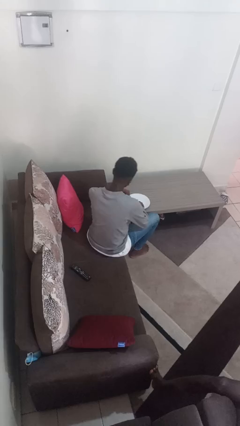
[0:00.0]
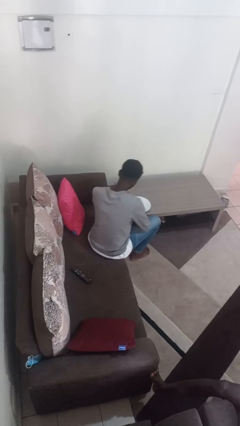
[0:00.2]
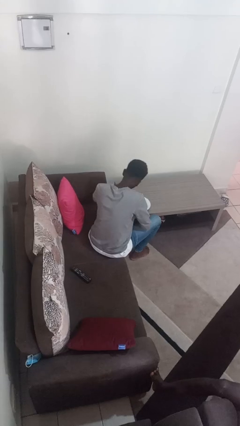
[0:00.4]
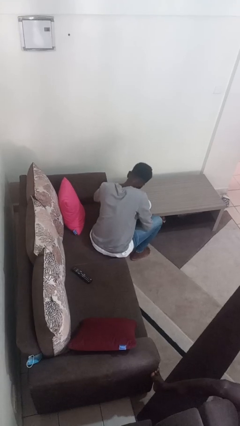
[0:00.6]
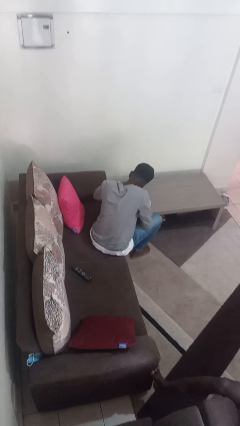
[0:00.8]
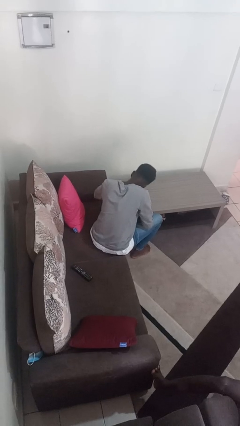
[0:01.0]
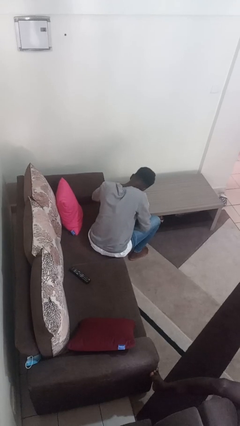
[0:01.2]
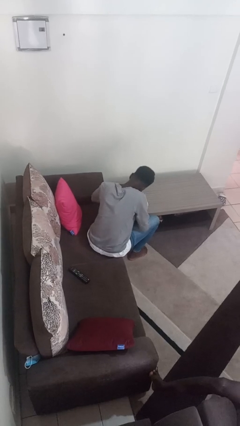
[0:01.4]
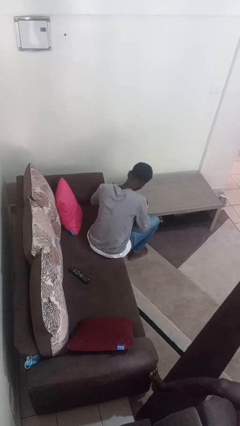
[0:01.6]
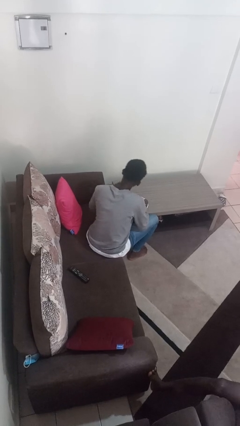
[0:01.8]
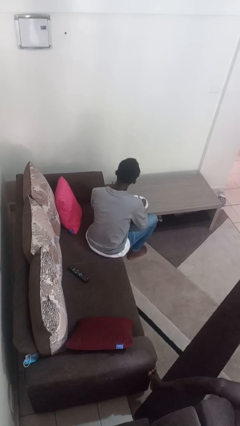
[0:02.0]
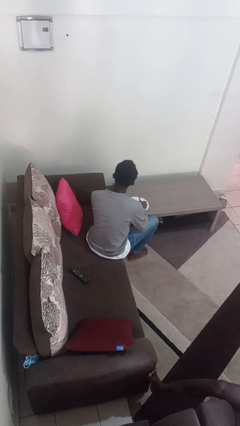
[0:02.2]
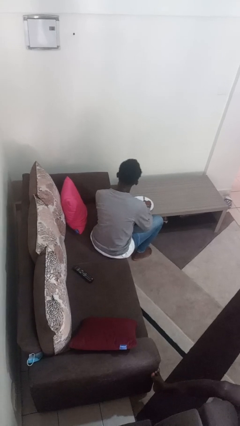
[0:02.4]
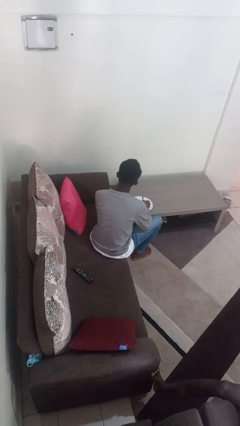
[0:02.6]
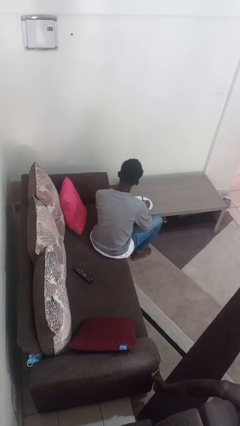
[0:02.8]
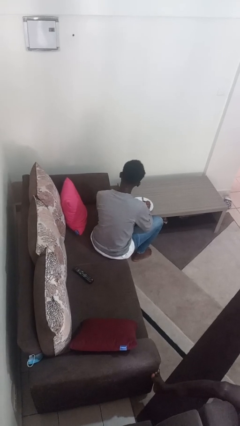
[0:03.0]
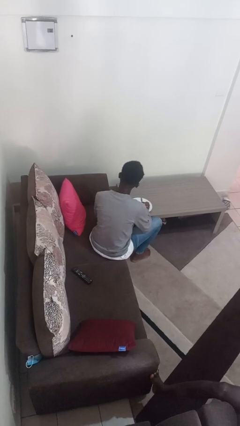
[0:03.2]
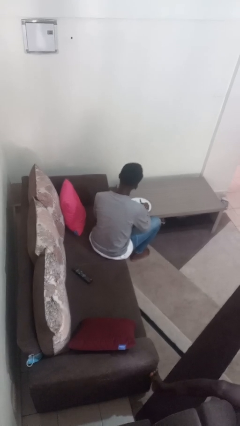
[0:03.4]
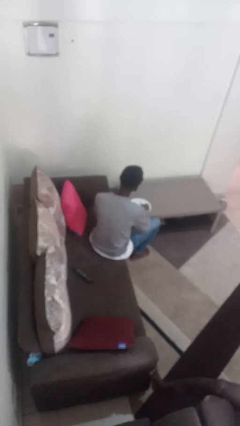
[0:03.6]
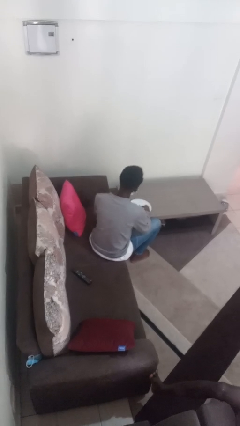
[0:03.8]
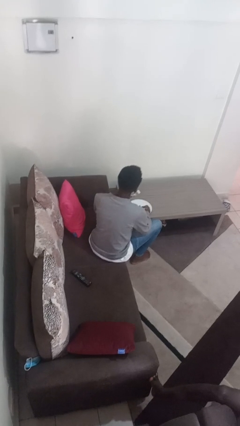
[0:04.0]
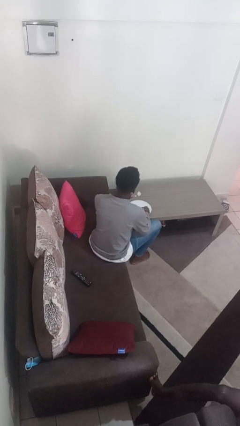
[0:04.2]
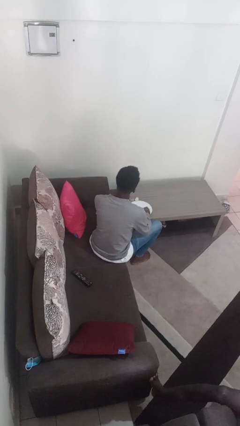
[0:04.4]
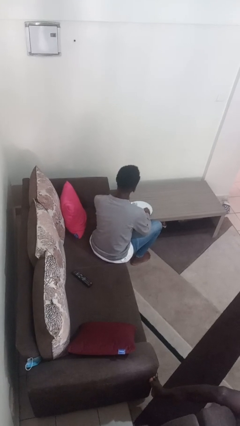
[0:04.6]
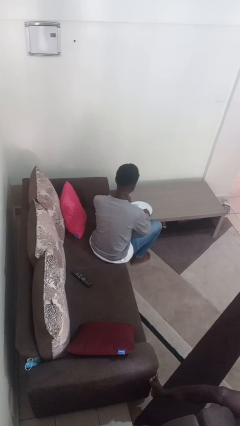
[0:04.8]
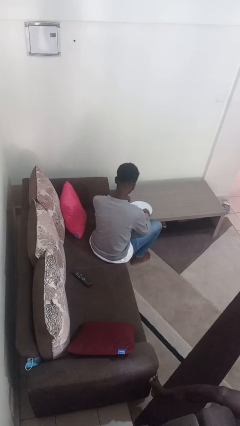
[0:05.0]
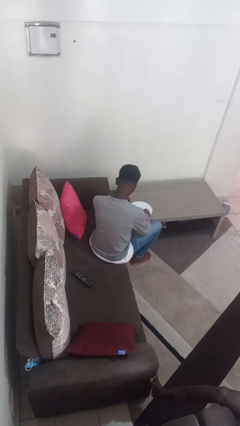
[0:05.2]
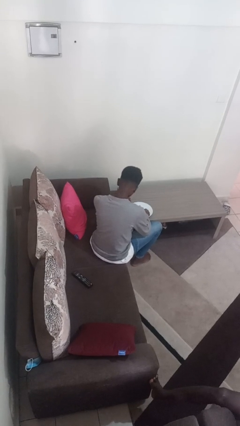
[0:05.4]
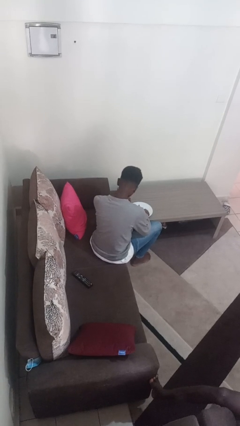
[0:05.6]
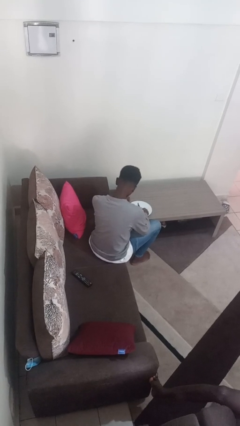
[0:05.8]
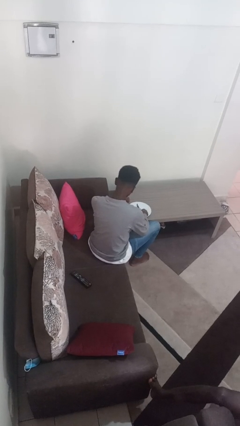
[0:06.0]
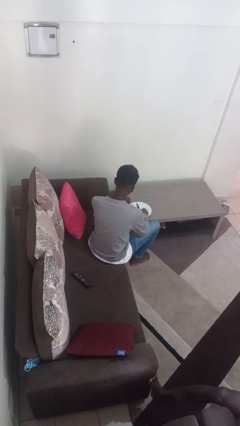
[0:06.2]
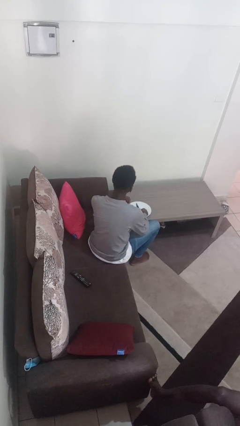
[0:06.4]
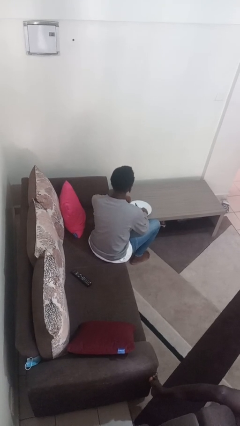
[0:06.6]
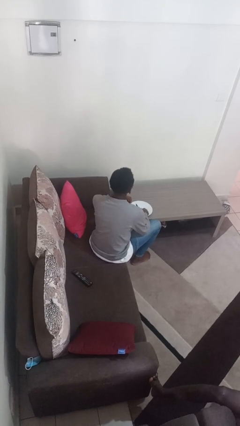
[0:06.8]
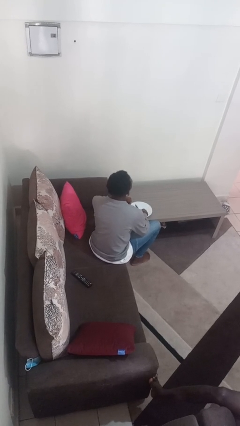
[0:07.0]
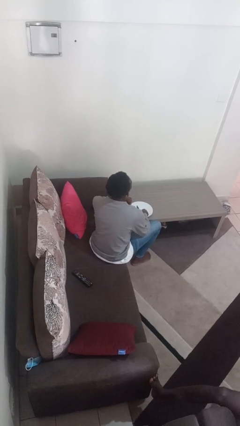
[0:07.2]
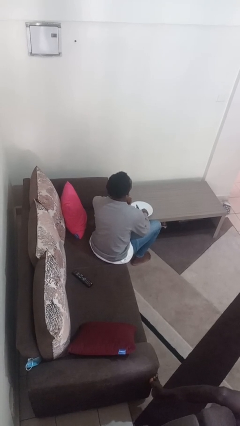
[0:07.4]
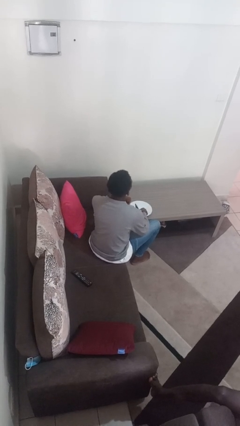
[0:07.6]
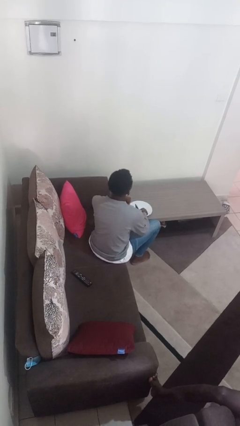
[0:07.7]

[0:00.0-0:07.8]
person eats with utensil

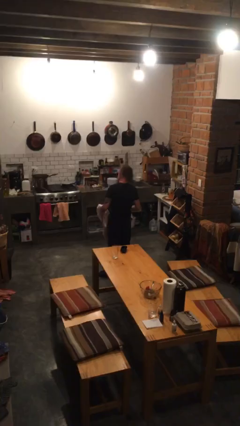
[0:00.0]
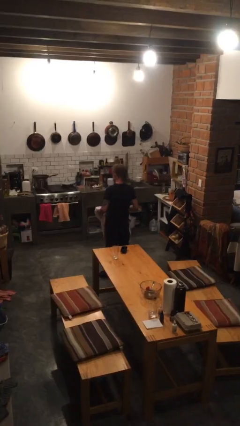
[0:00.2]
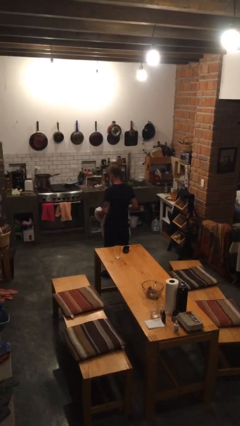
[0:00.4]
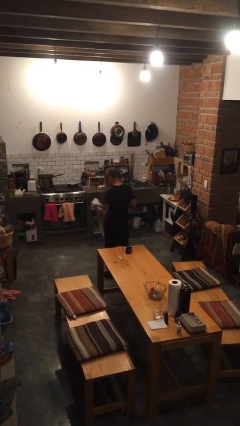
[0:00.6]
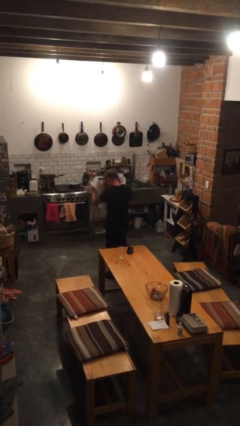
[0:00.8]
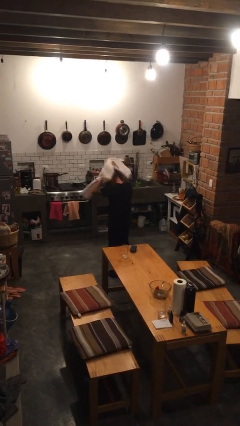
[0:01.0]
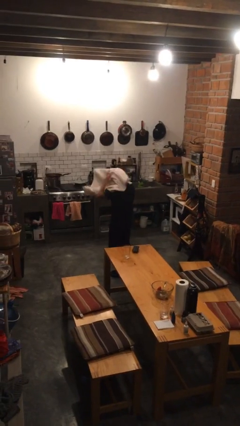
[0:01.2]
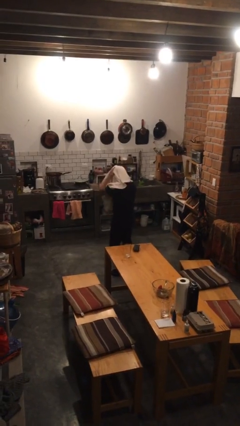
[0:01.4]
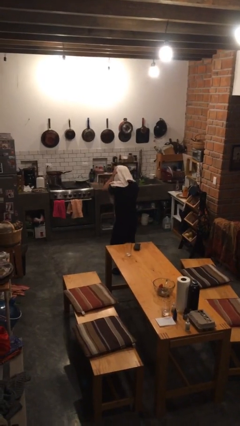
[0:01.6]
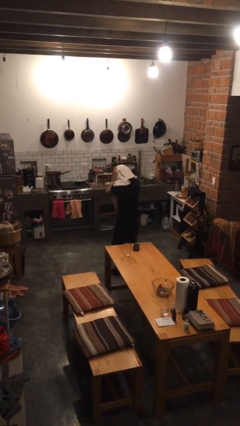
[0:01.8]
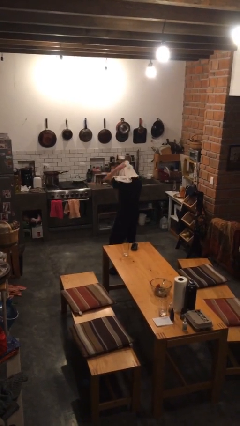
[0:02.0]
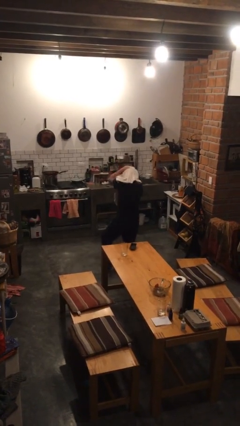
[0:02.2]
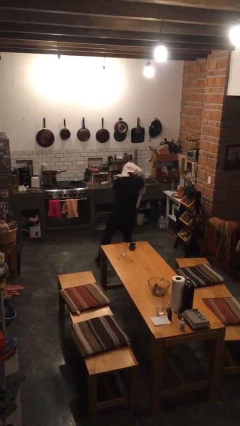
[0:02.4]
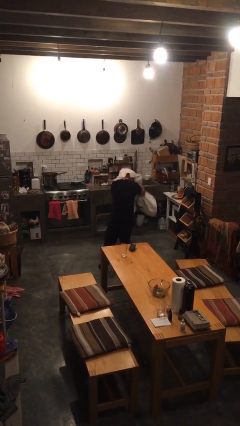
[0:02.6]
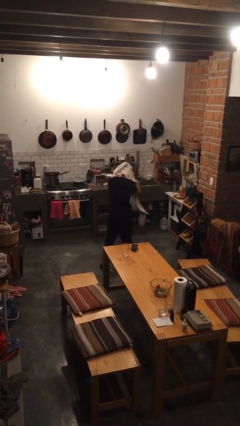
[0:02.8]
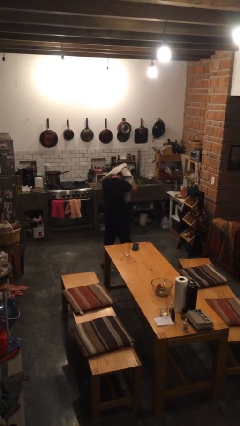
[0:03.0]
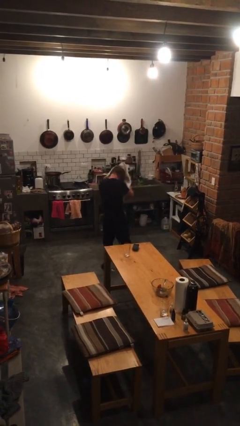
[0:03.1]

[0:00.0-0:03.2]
person dries hair with towel

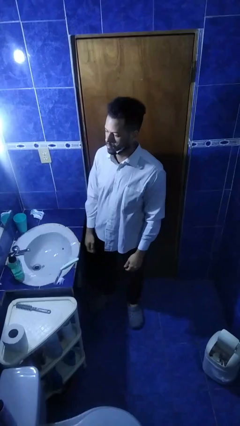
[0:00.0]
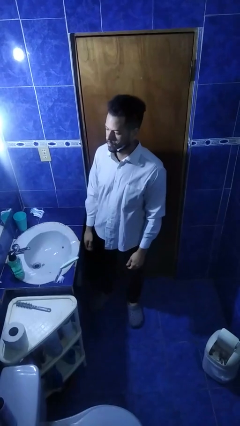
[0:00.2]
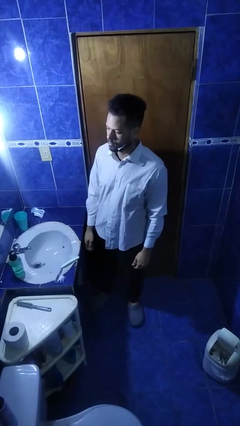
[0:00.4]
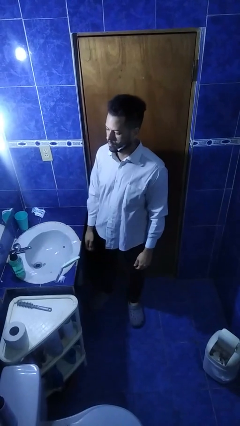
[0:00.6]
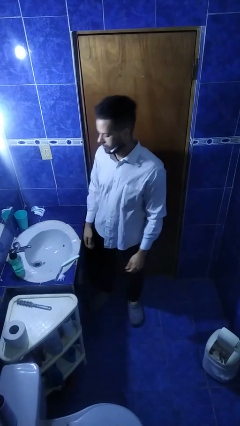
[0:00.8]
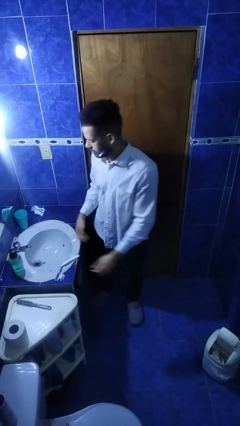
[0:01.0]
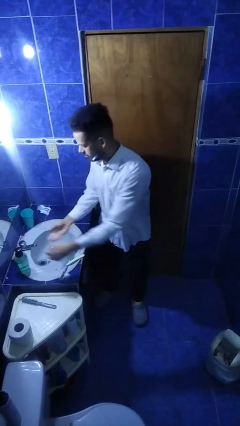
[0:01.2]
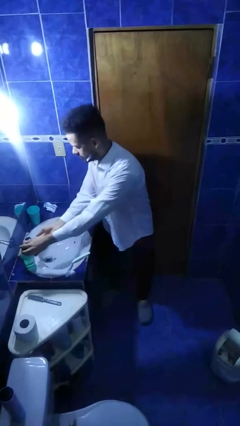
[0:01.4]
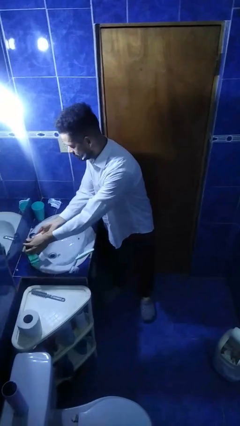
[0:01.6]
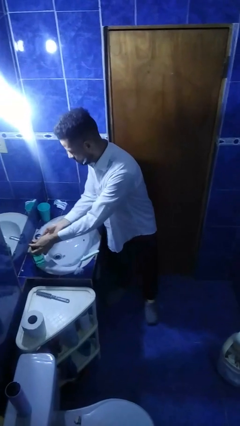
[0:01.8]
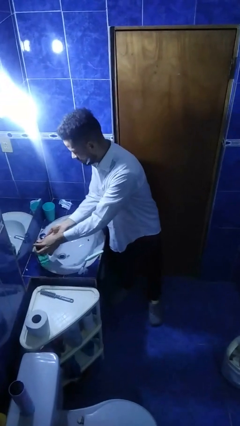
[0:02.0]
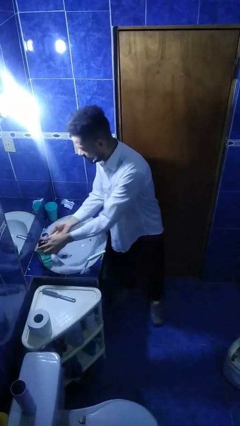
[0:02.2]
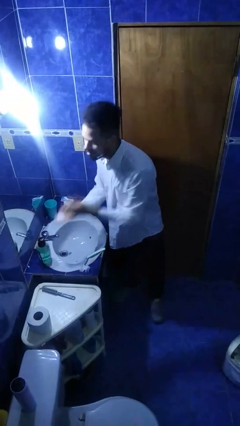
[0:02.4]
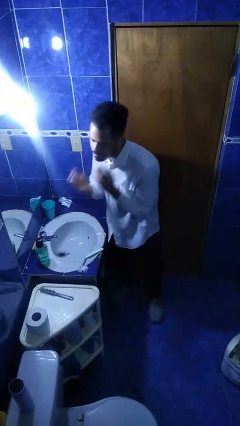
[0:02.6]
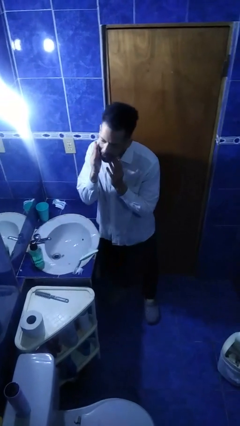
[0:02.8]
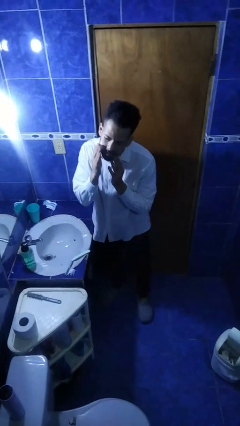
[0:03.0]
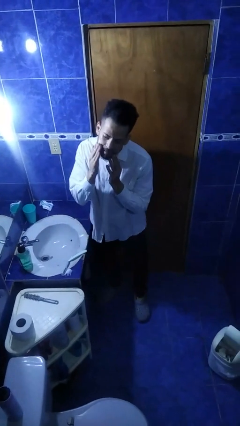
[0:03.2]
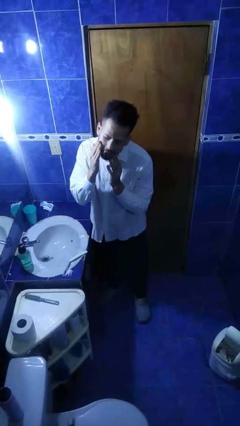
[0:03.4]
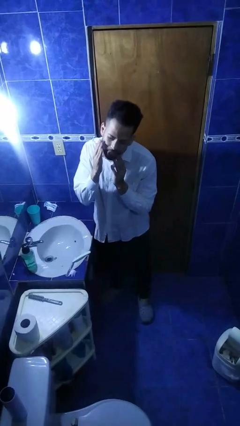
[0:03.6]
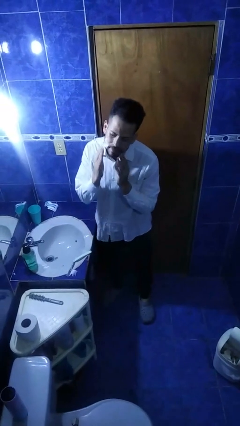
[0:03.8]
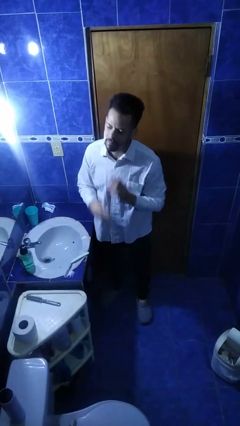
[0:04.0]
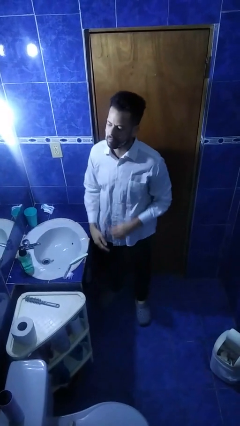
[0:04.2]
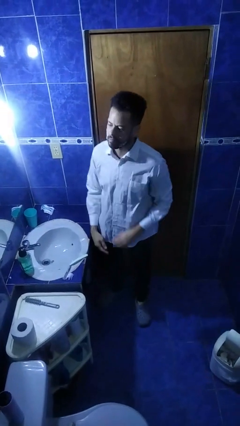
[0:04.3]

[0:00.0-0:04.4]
person applies shaving cream

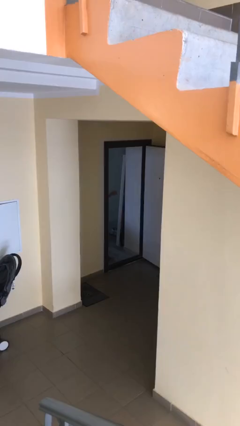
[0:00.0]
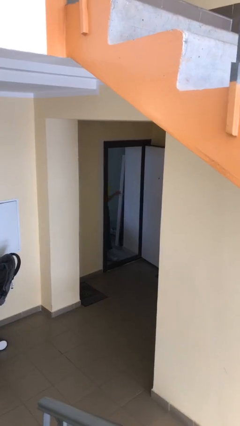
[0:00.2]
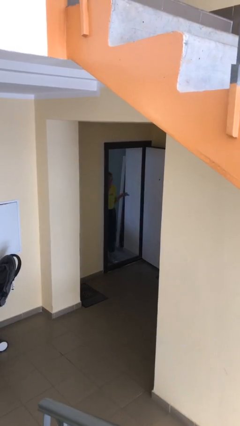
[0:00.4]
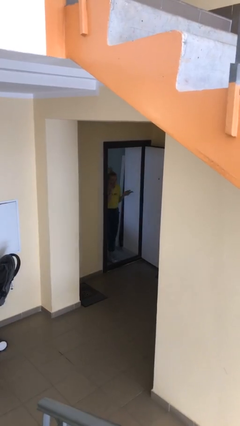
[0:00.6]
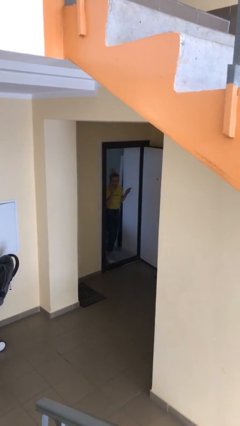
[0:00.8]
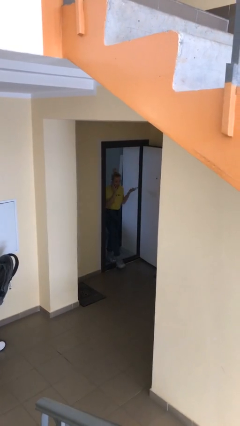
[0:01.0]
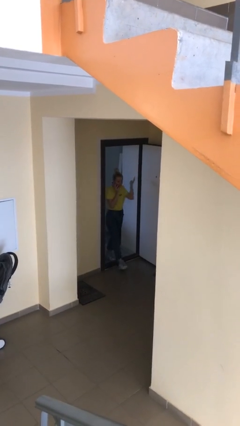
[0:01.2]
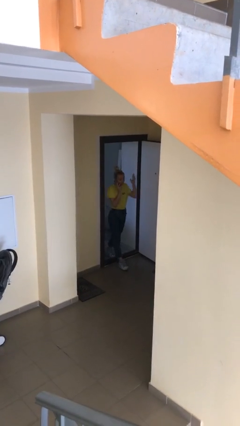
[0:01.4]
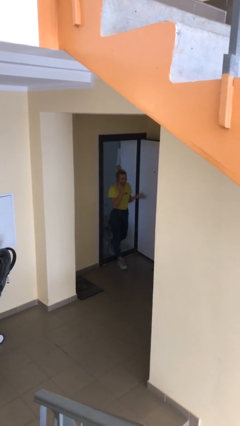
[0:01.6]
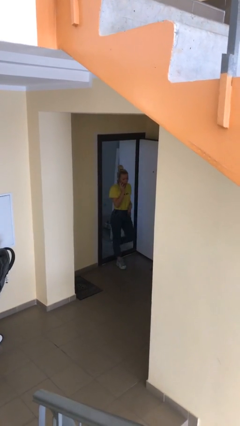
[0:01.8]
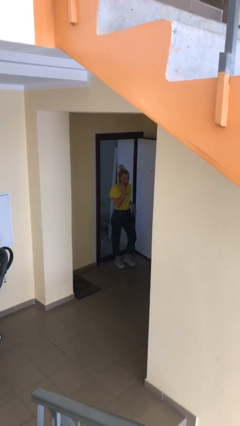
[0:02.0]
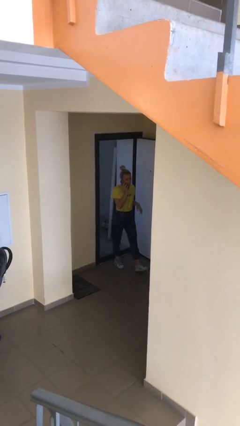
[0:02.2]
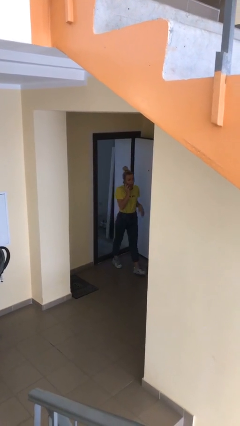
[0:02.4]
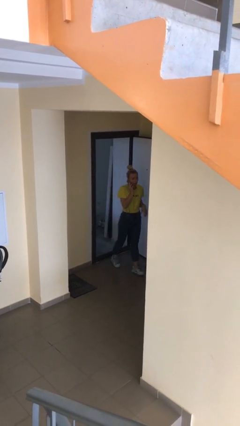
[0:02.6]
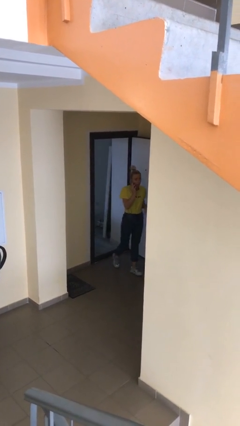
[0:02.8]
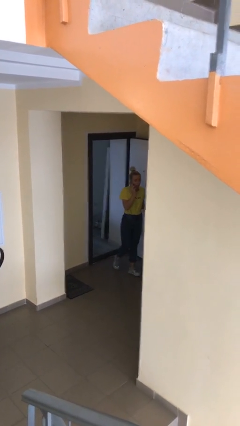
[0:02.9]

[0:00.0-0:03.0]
person enters scene through structure
